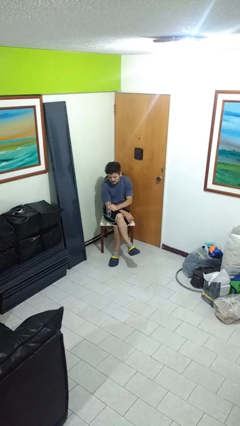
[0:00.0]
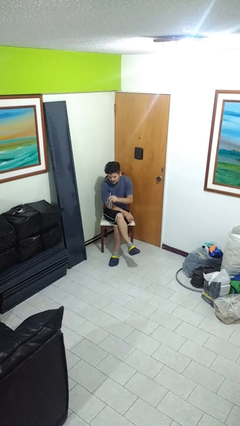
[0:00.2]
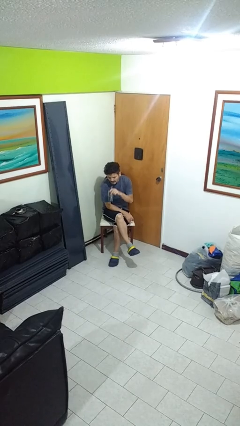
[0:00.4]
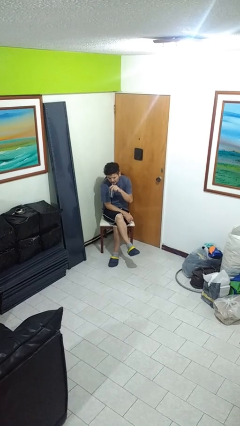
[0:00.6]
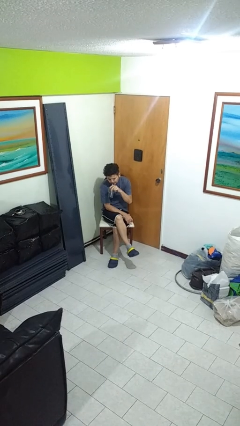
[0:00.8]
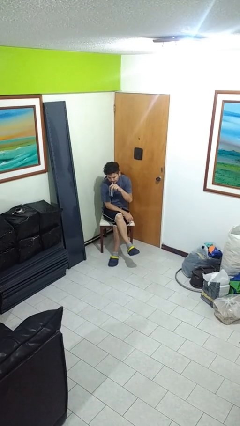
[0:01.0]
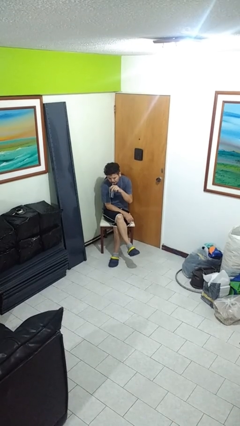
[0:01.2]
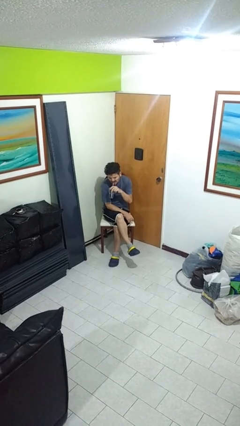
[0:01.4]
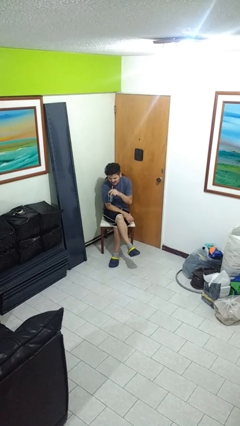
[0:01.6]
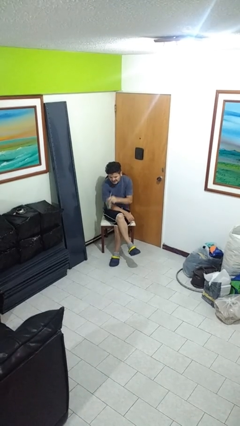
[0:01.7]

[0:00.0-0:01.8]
person drinks from straw

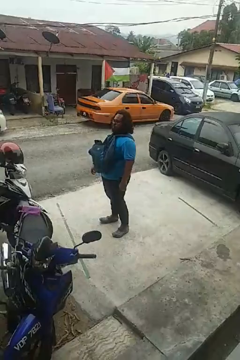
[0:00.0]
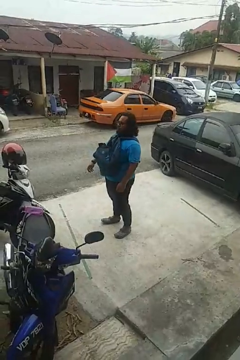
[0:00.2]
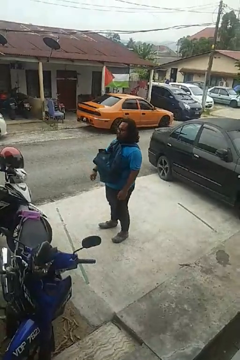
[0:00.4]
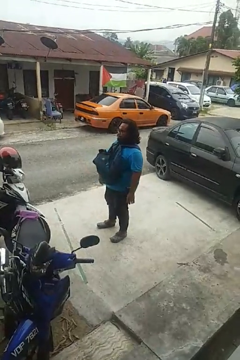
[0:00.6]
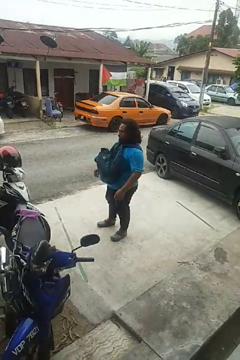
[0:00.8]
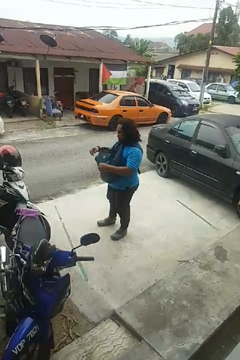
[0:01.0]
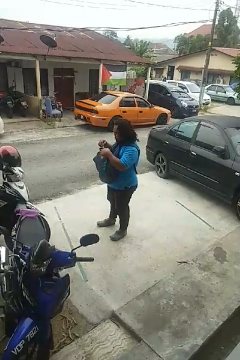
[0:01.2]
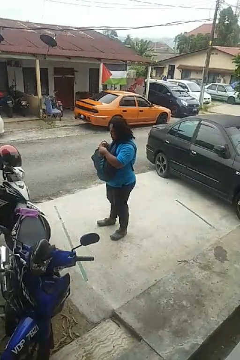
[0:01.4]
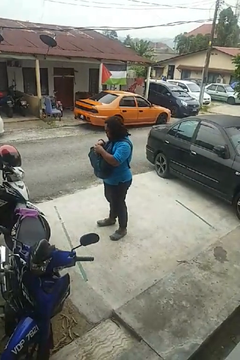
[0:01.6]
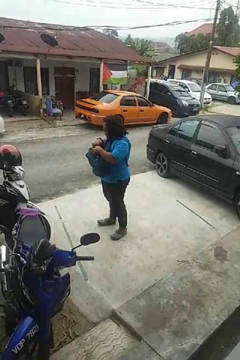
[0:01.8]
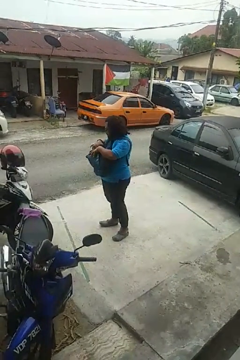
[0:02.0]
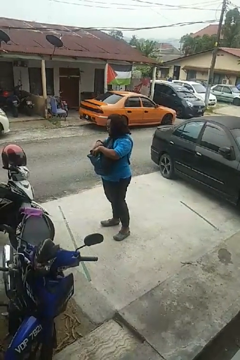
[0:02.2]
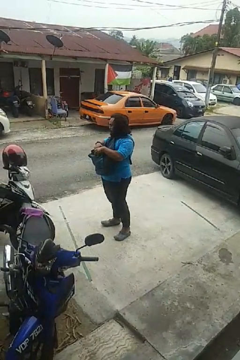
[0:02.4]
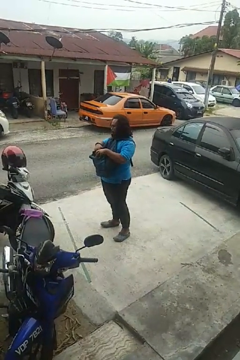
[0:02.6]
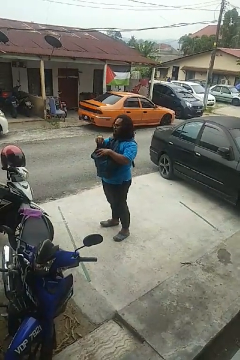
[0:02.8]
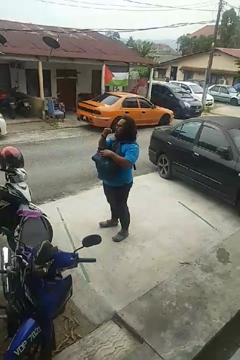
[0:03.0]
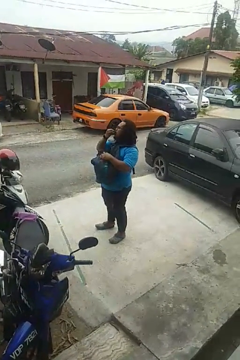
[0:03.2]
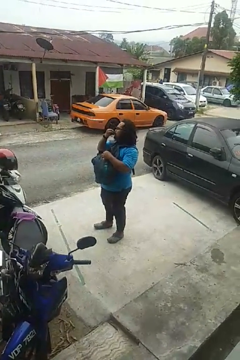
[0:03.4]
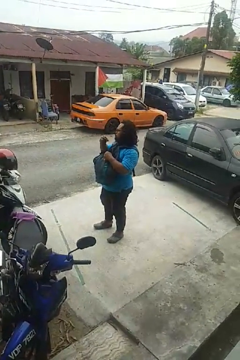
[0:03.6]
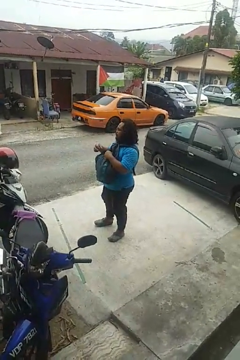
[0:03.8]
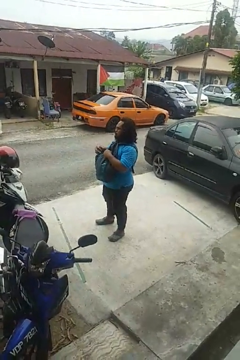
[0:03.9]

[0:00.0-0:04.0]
person eats snack from bag

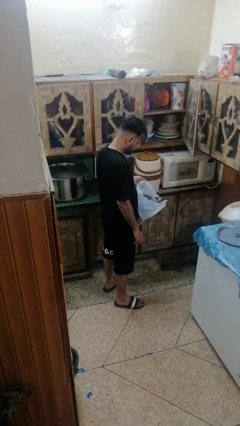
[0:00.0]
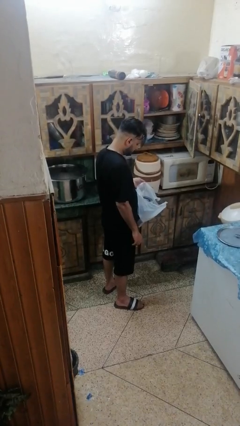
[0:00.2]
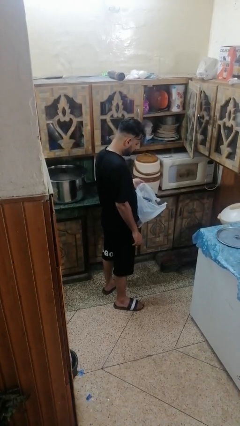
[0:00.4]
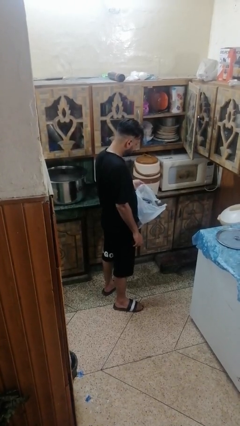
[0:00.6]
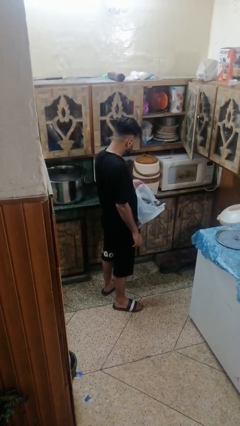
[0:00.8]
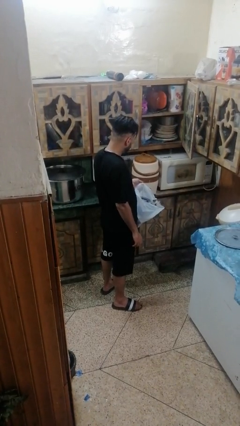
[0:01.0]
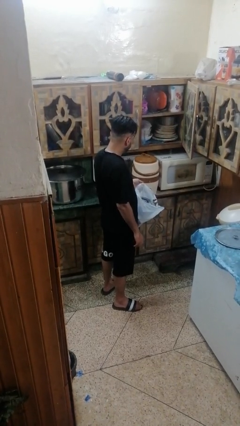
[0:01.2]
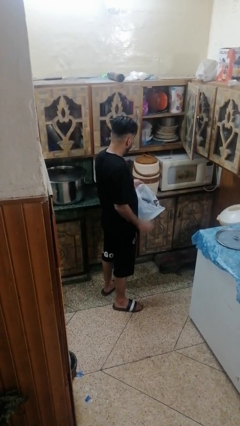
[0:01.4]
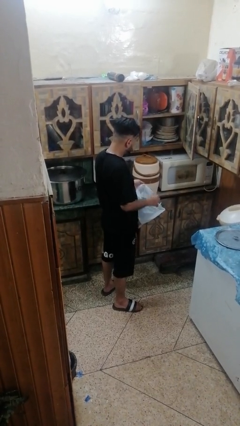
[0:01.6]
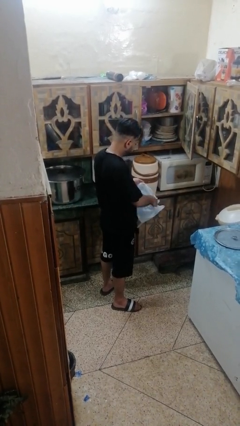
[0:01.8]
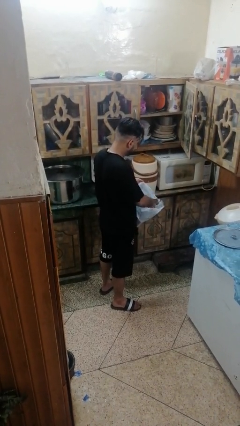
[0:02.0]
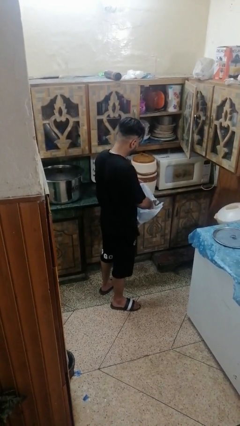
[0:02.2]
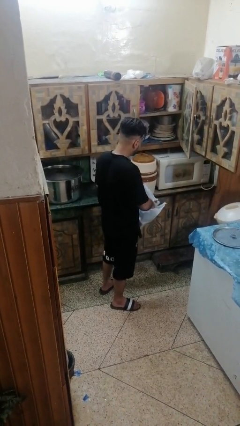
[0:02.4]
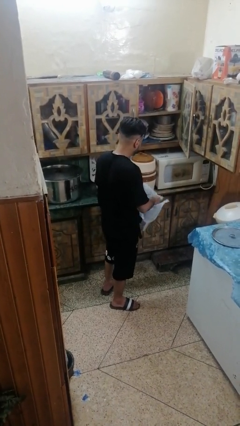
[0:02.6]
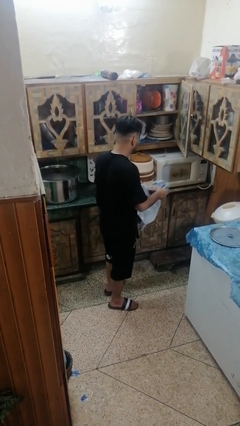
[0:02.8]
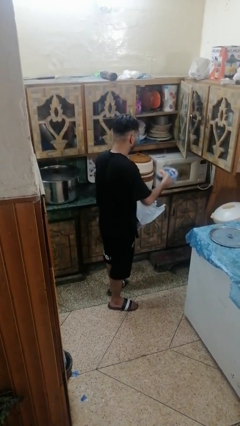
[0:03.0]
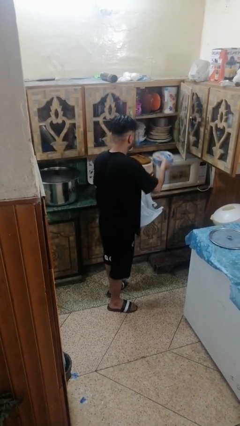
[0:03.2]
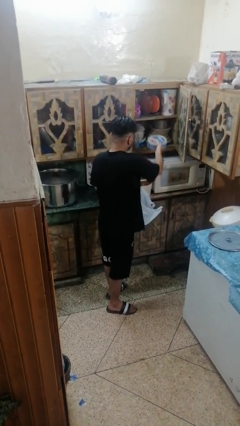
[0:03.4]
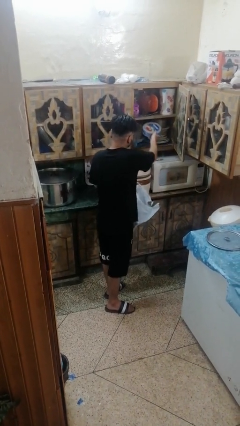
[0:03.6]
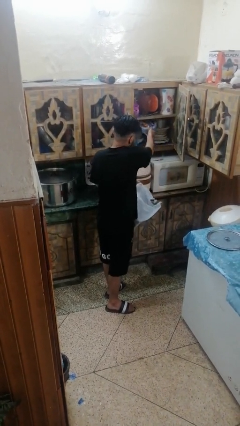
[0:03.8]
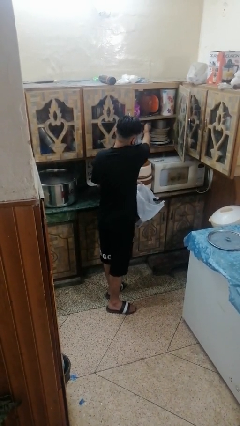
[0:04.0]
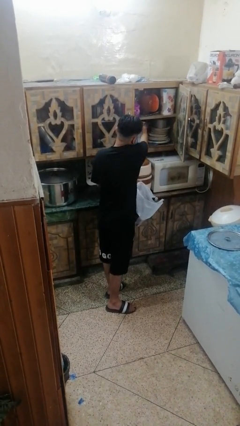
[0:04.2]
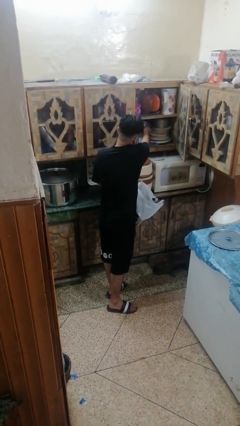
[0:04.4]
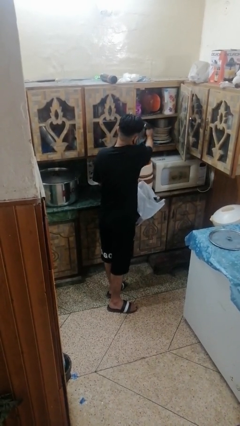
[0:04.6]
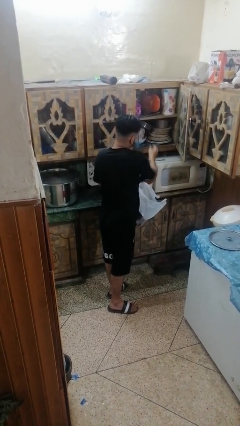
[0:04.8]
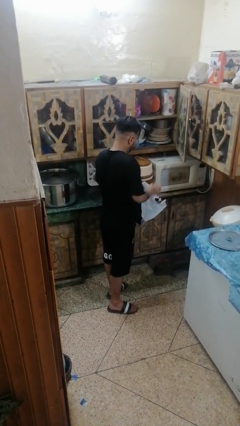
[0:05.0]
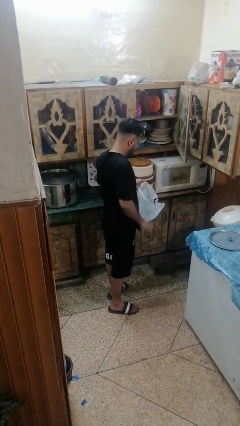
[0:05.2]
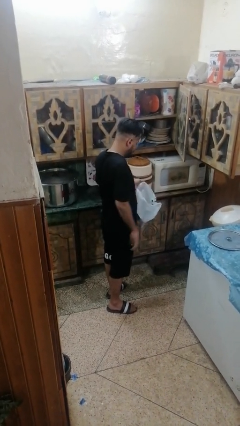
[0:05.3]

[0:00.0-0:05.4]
person loads groceries into cabinet

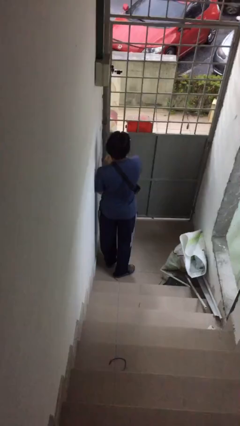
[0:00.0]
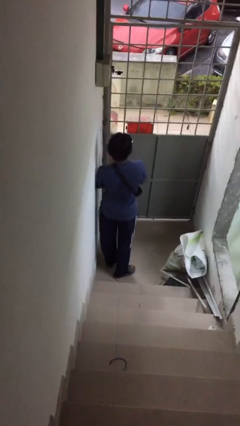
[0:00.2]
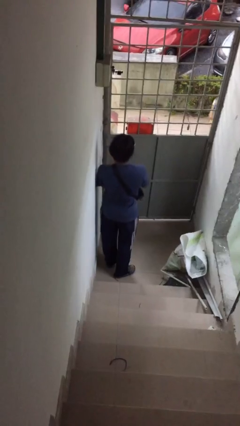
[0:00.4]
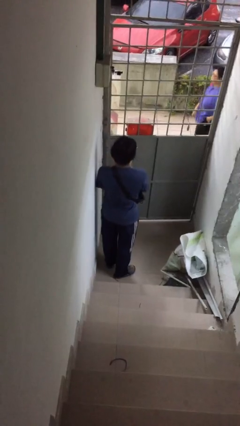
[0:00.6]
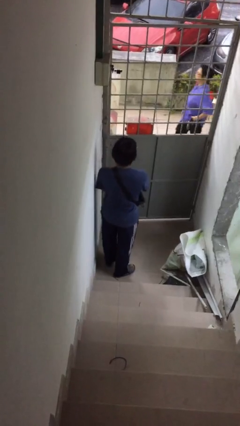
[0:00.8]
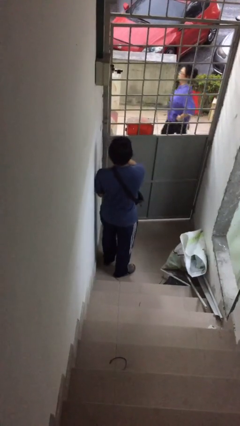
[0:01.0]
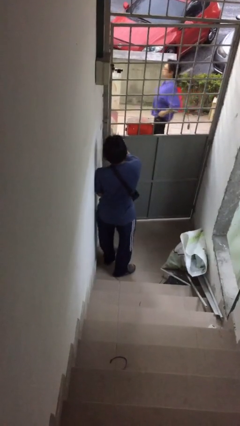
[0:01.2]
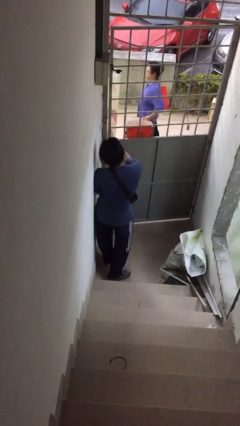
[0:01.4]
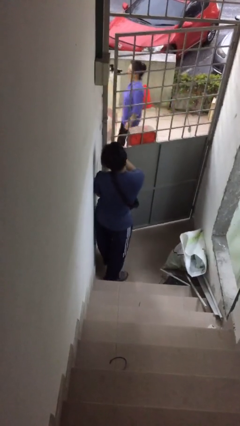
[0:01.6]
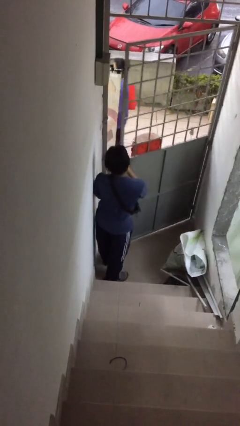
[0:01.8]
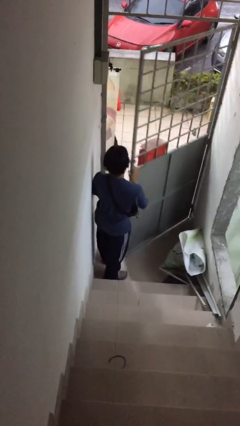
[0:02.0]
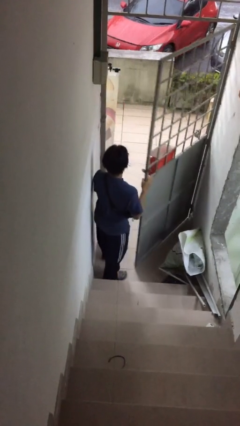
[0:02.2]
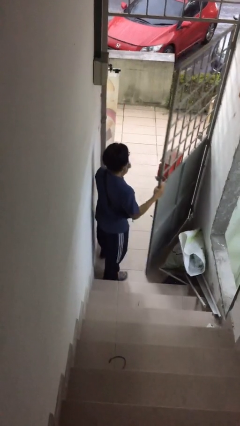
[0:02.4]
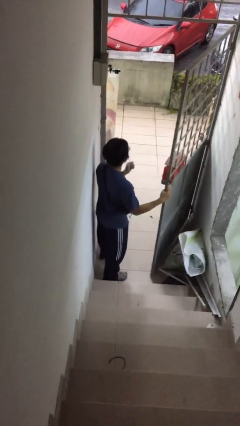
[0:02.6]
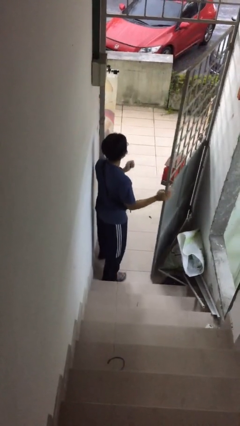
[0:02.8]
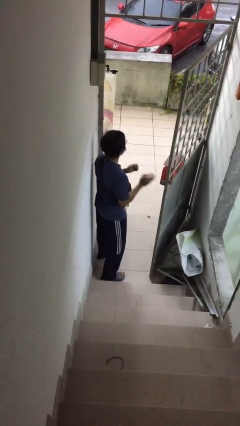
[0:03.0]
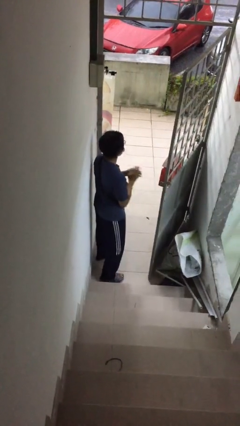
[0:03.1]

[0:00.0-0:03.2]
person opens facility door

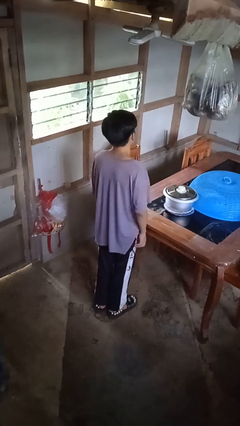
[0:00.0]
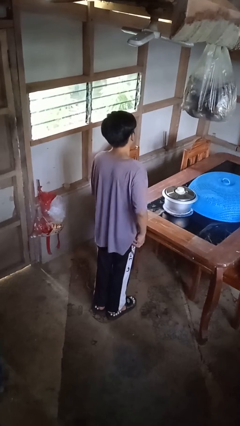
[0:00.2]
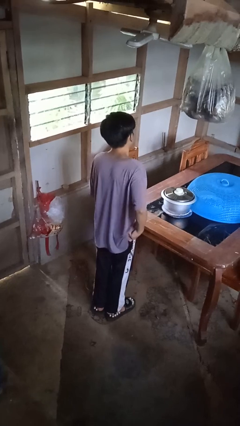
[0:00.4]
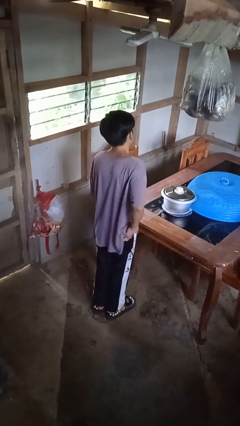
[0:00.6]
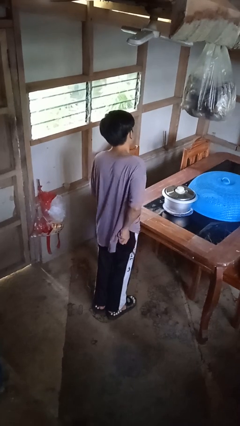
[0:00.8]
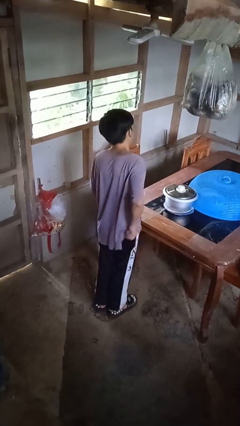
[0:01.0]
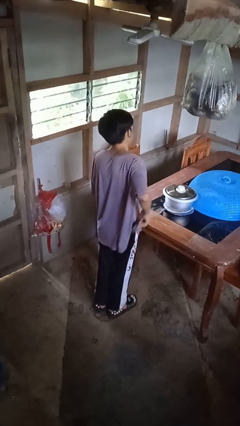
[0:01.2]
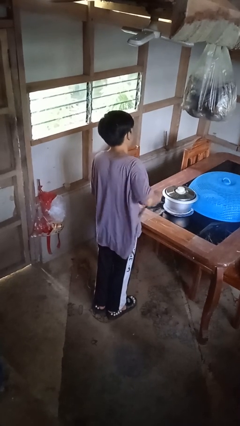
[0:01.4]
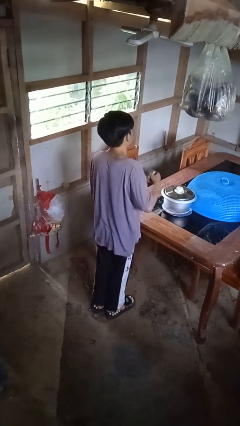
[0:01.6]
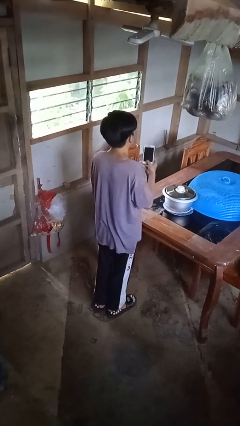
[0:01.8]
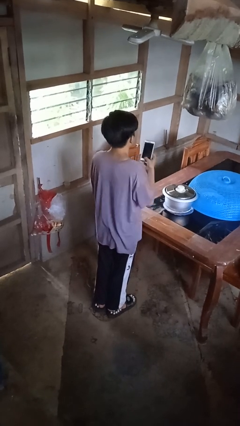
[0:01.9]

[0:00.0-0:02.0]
person takes phone from pocket

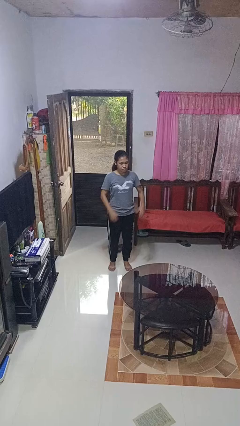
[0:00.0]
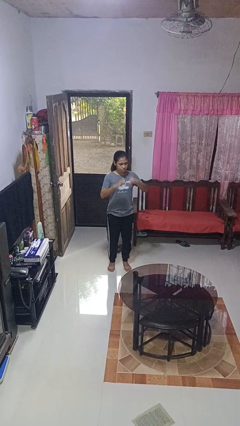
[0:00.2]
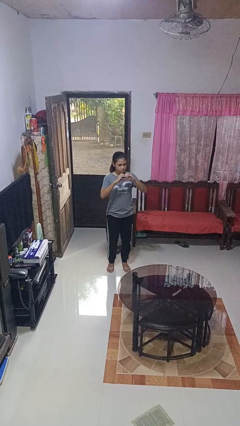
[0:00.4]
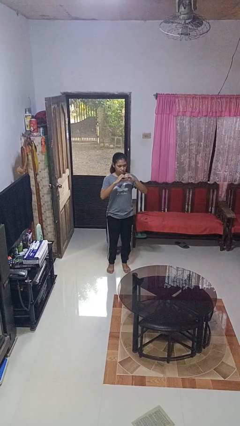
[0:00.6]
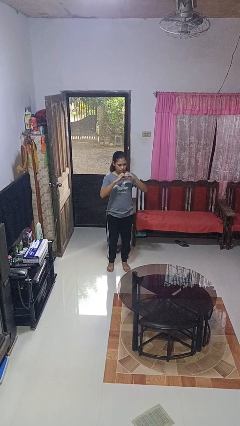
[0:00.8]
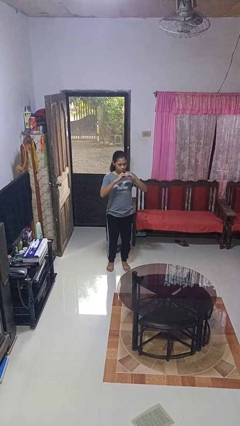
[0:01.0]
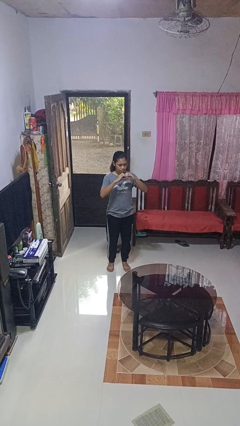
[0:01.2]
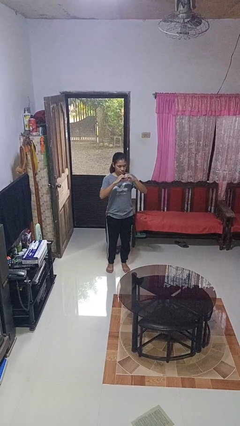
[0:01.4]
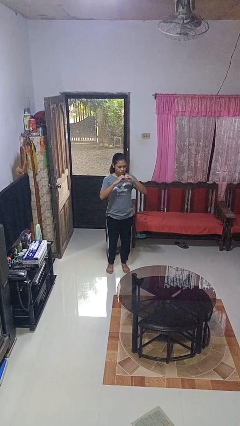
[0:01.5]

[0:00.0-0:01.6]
person gestures heart
